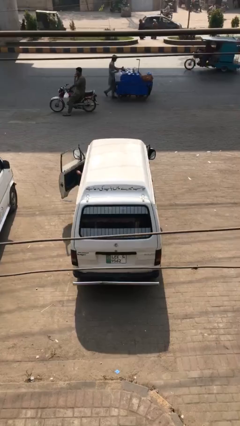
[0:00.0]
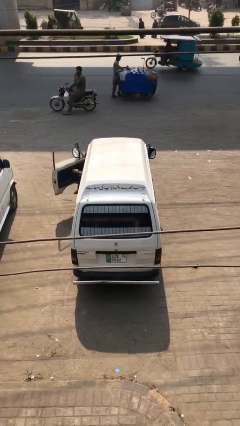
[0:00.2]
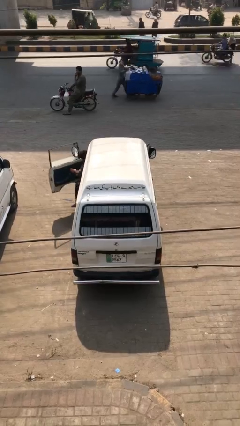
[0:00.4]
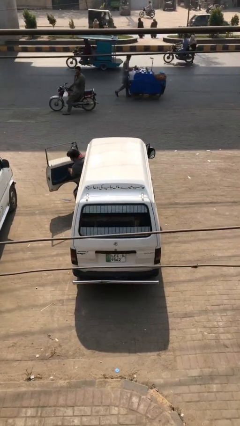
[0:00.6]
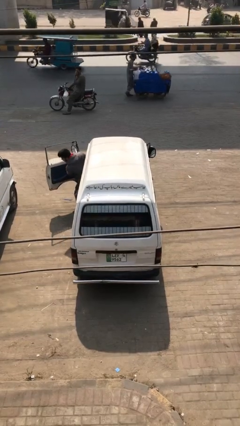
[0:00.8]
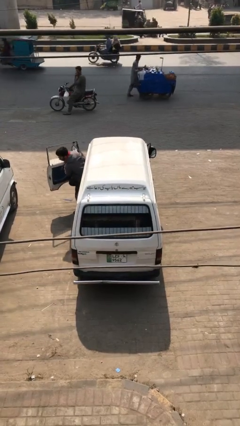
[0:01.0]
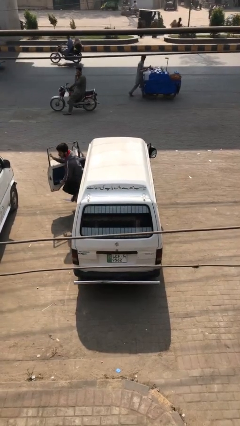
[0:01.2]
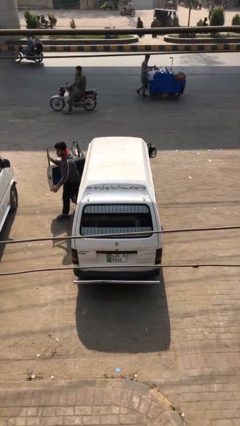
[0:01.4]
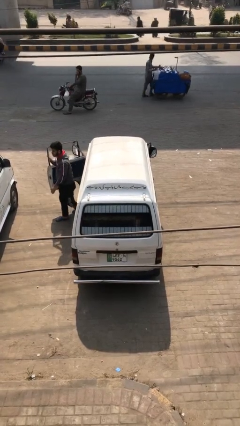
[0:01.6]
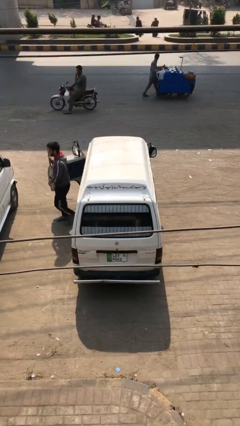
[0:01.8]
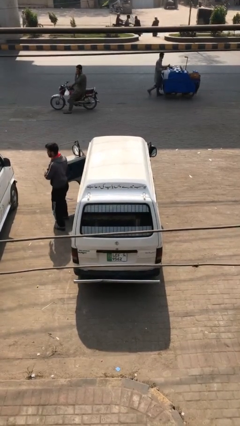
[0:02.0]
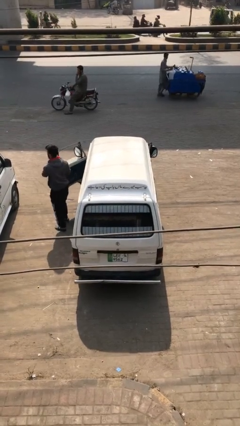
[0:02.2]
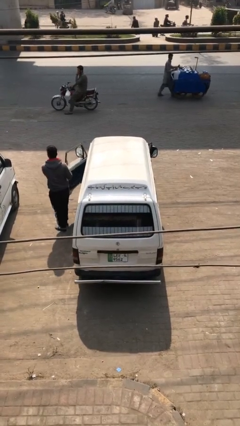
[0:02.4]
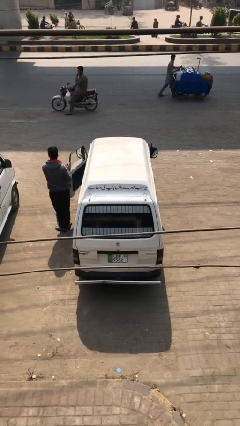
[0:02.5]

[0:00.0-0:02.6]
car drops off person

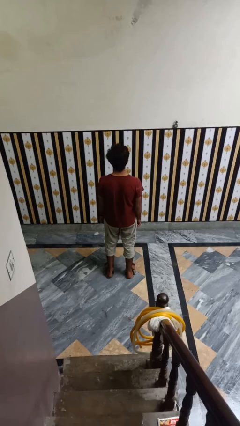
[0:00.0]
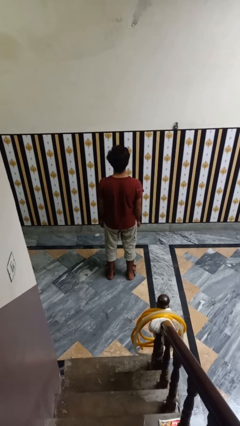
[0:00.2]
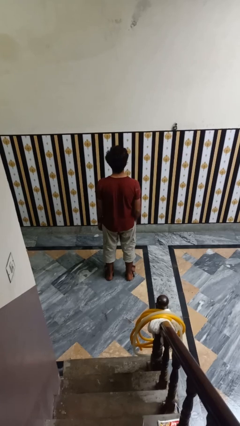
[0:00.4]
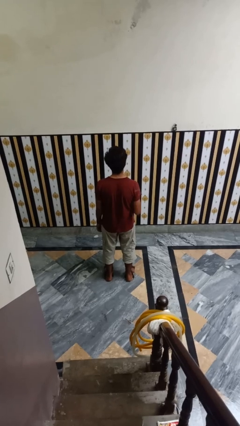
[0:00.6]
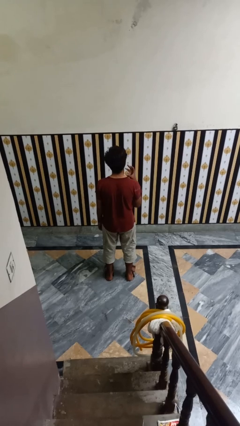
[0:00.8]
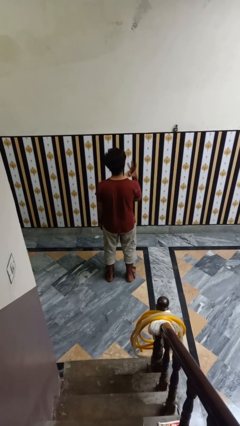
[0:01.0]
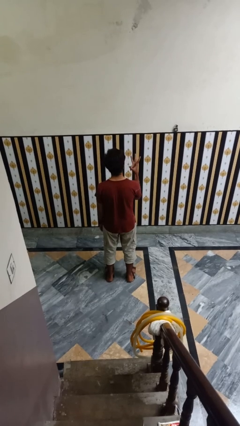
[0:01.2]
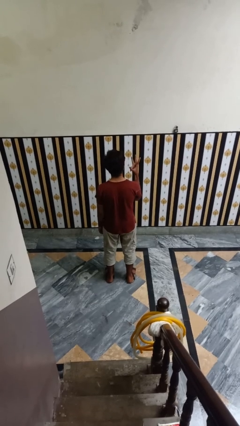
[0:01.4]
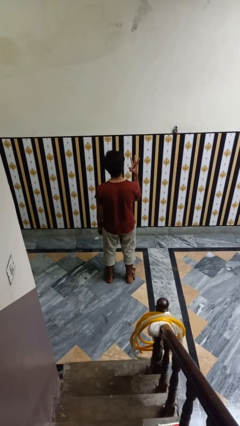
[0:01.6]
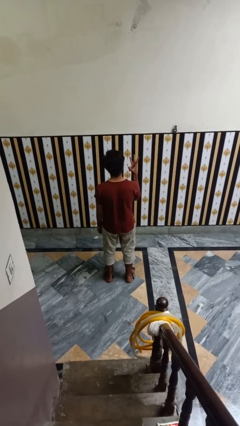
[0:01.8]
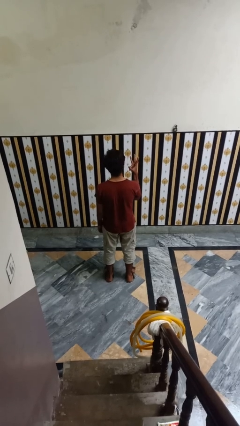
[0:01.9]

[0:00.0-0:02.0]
person gestures number three

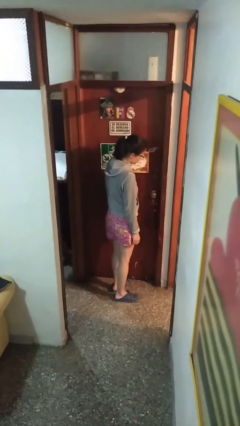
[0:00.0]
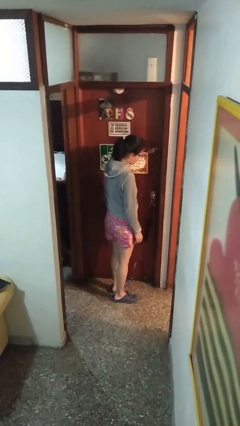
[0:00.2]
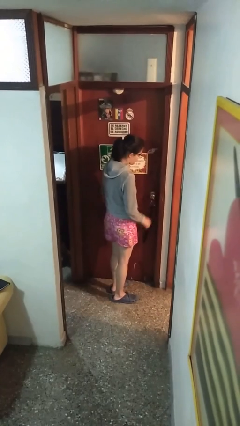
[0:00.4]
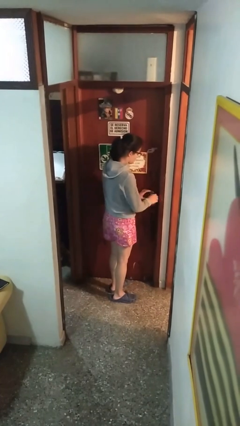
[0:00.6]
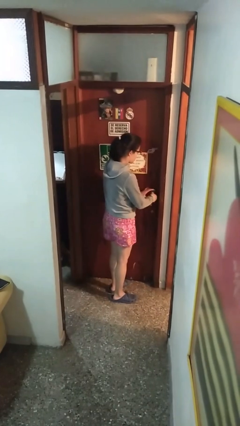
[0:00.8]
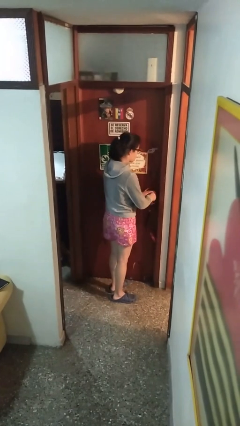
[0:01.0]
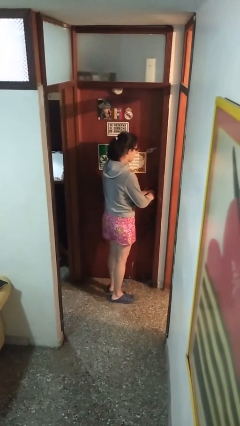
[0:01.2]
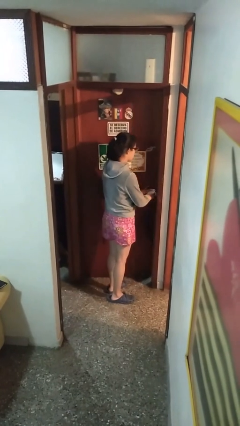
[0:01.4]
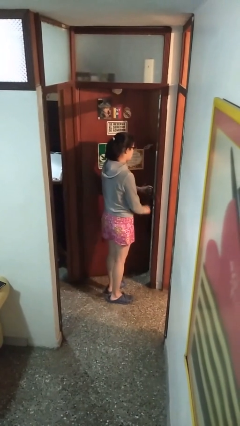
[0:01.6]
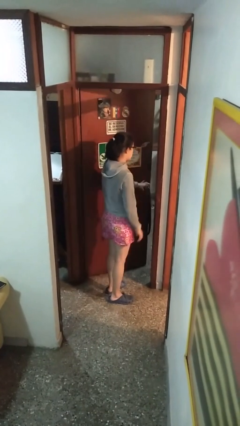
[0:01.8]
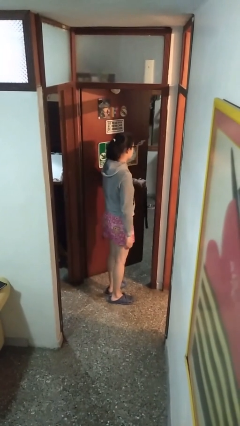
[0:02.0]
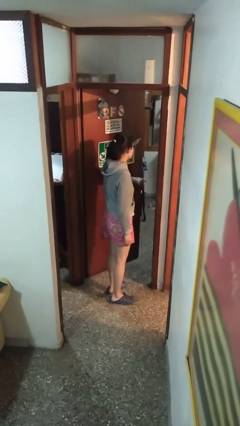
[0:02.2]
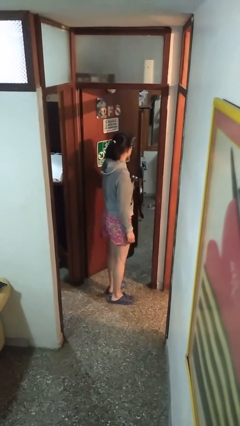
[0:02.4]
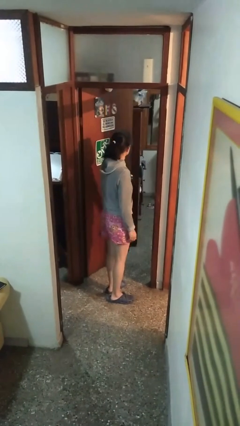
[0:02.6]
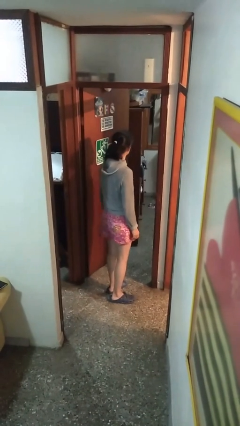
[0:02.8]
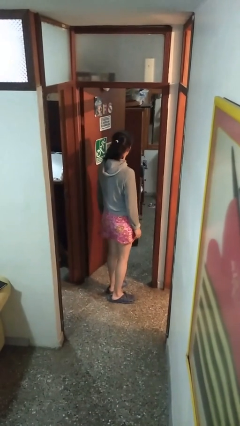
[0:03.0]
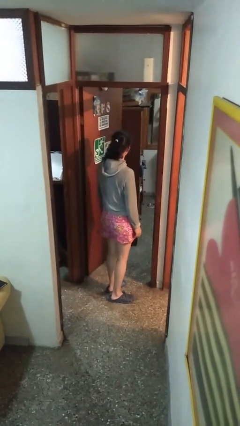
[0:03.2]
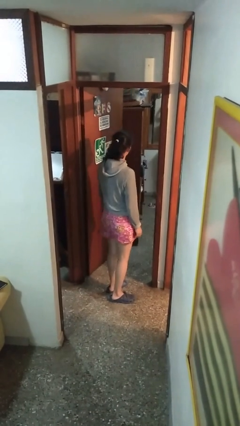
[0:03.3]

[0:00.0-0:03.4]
person opens facility door

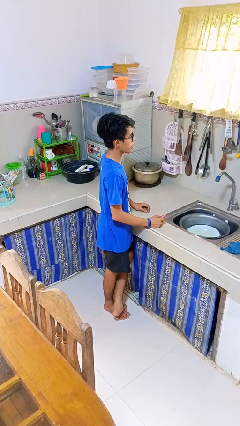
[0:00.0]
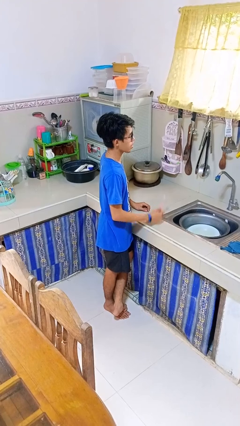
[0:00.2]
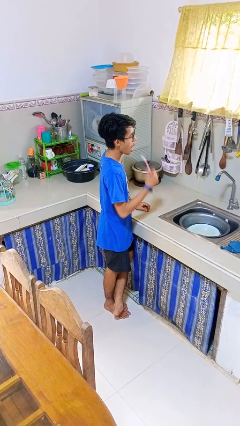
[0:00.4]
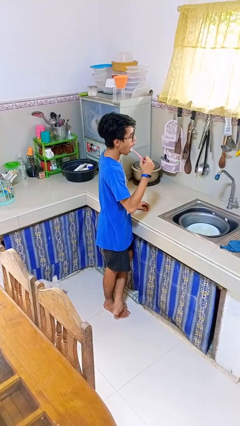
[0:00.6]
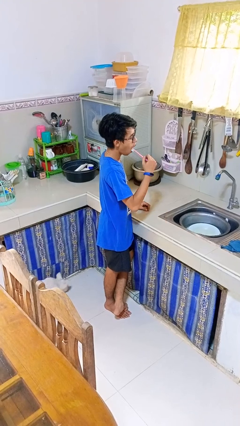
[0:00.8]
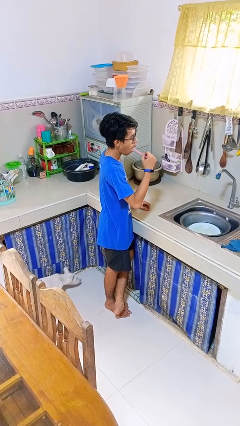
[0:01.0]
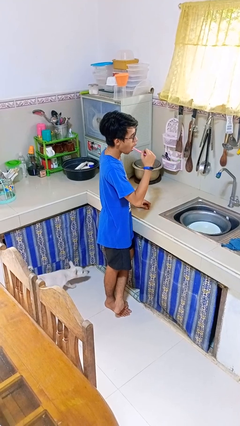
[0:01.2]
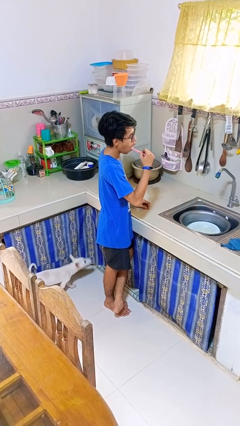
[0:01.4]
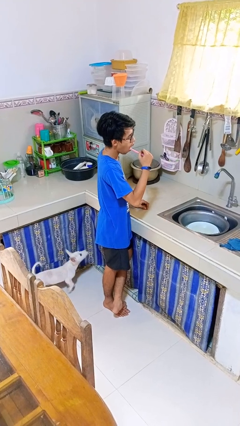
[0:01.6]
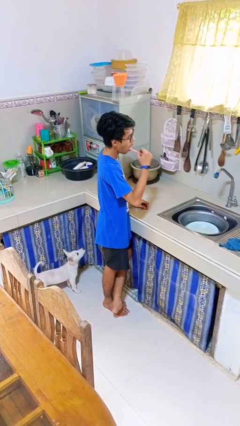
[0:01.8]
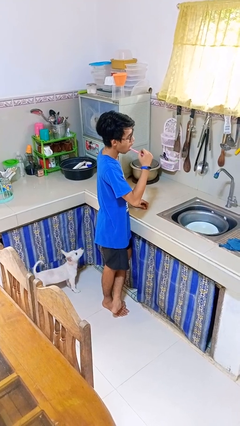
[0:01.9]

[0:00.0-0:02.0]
person brushes teeth

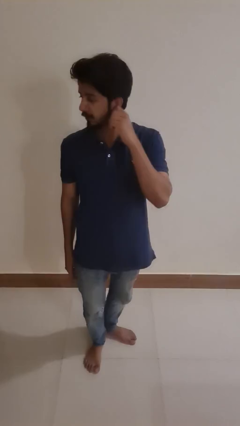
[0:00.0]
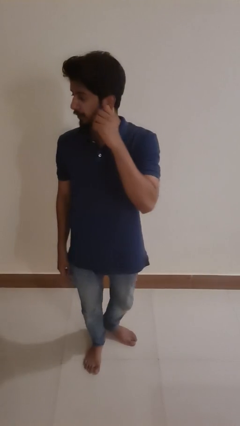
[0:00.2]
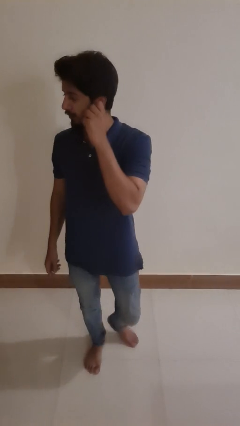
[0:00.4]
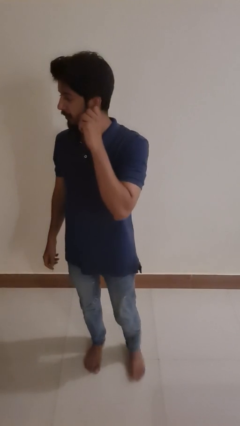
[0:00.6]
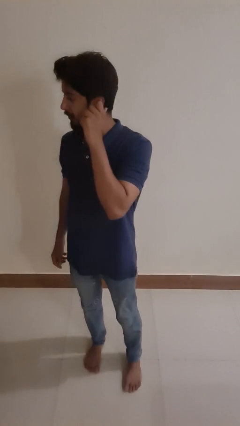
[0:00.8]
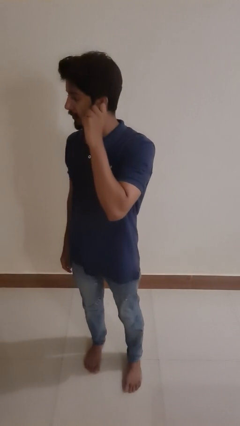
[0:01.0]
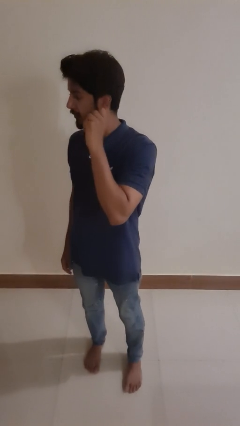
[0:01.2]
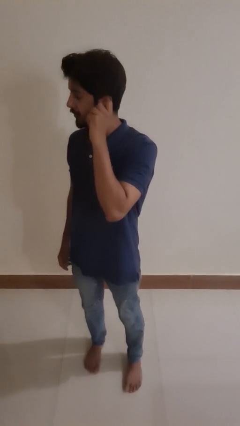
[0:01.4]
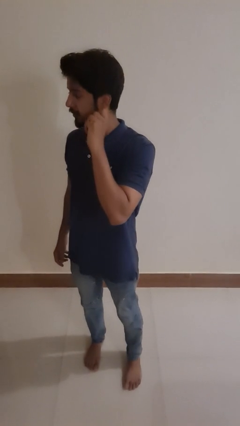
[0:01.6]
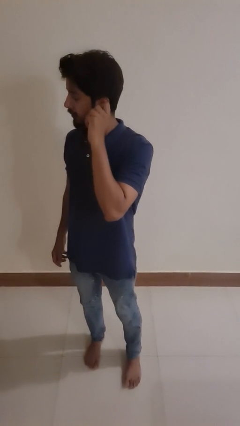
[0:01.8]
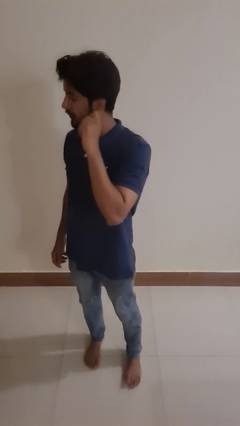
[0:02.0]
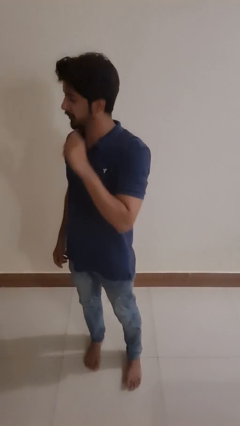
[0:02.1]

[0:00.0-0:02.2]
person touches earlobe

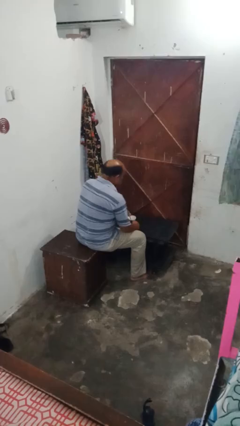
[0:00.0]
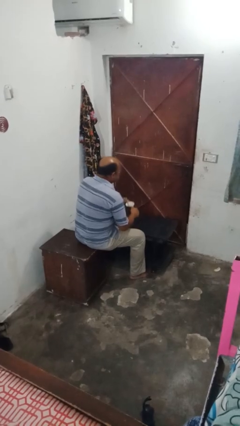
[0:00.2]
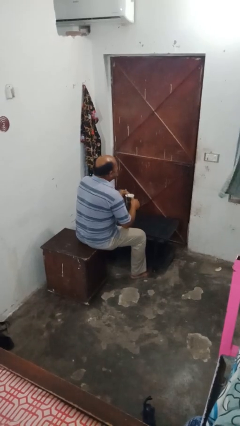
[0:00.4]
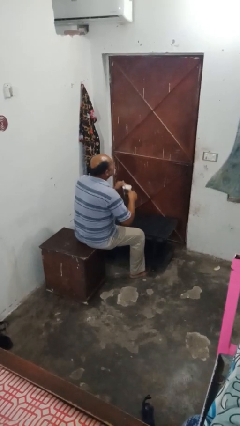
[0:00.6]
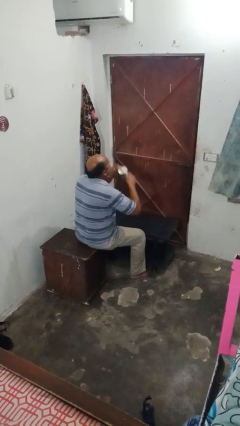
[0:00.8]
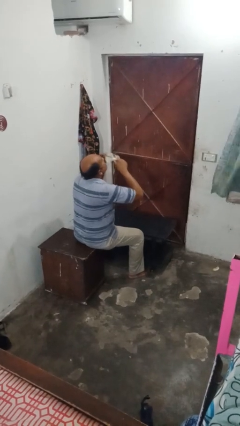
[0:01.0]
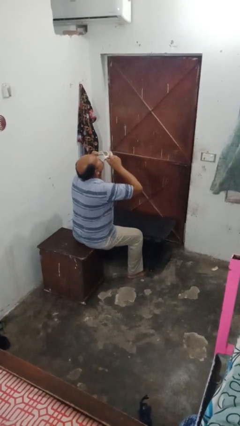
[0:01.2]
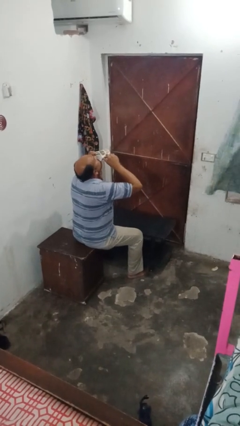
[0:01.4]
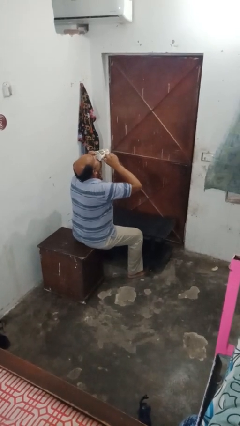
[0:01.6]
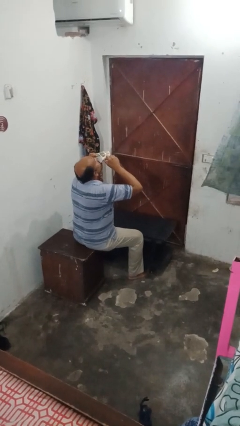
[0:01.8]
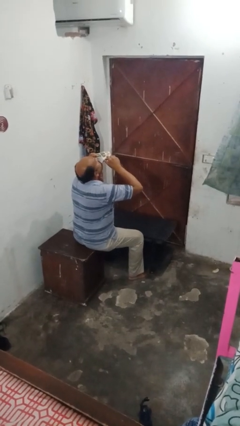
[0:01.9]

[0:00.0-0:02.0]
person drinks from mug

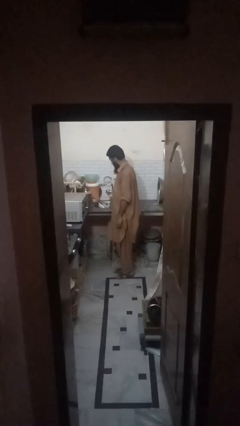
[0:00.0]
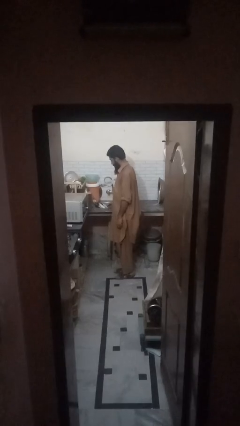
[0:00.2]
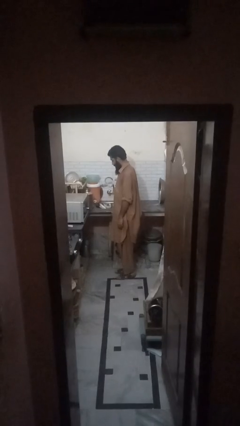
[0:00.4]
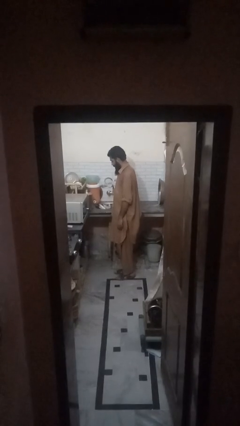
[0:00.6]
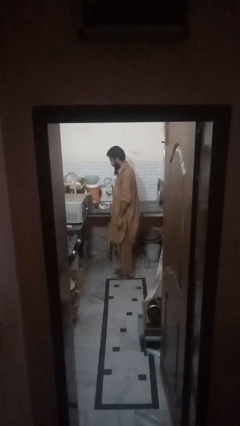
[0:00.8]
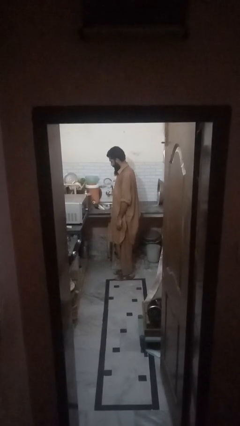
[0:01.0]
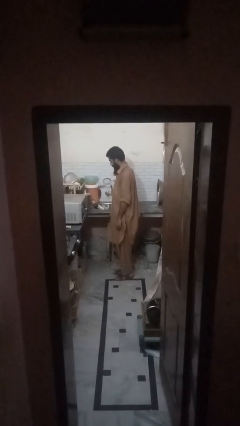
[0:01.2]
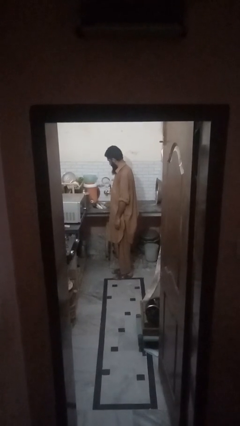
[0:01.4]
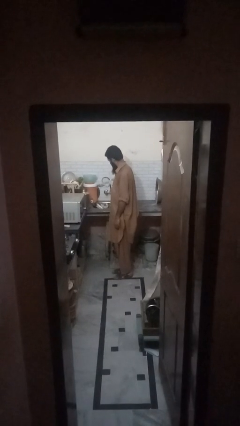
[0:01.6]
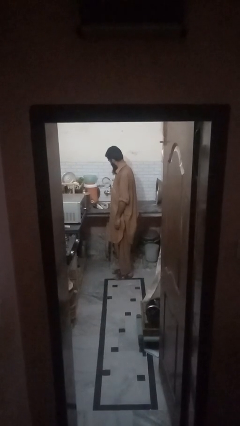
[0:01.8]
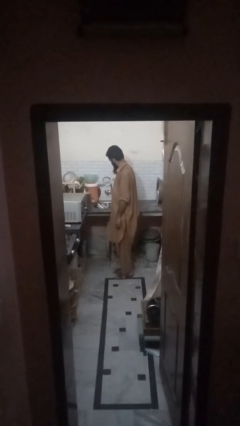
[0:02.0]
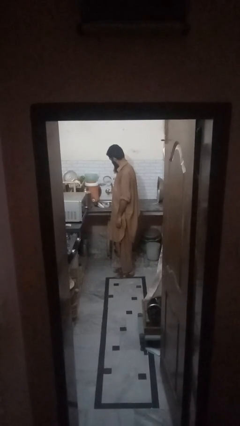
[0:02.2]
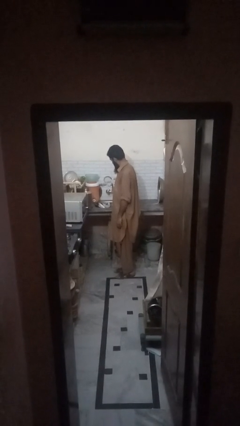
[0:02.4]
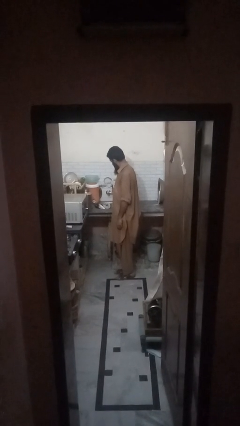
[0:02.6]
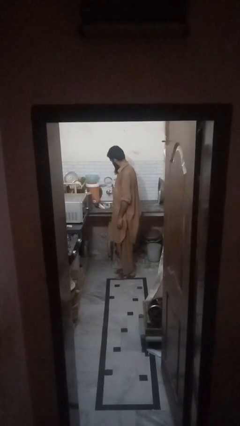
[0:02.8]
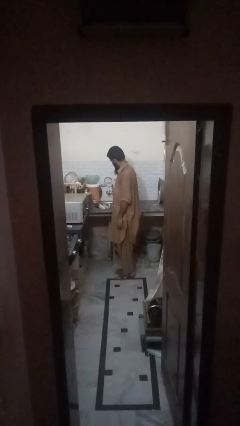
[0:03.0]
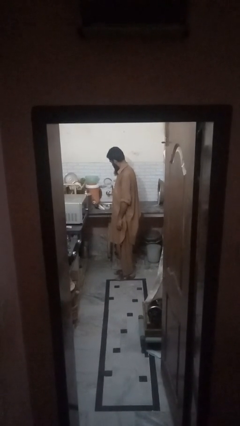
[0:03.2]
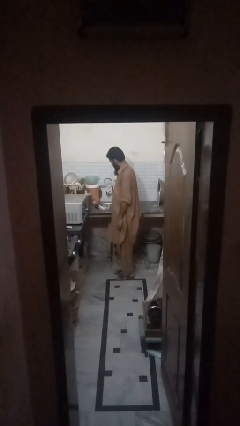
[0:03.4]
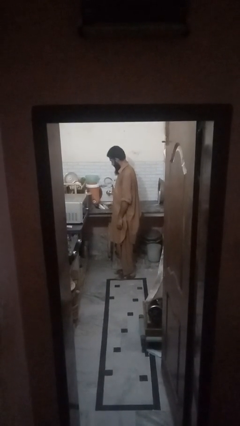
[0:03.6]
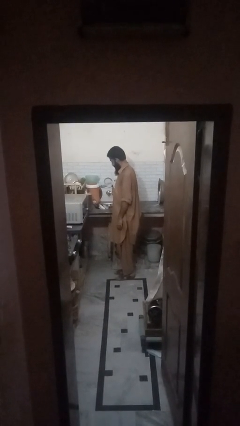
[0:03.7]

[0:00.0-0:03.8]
person opens dishwasher
